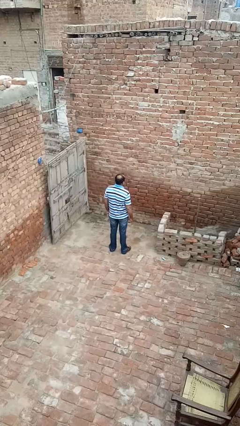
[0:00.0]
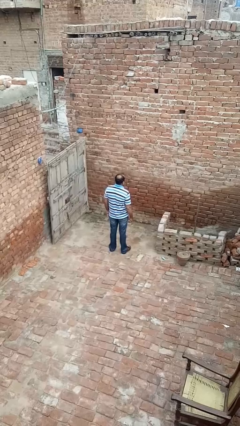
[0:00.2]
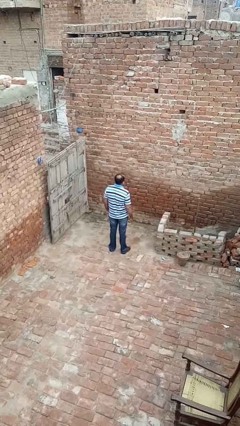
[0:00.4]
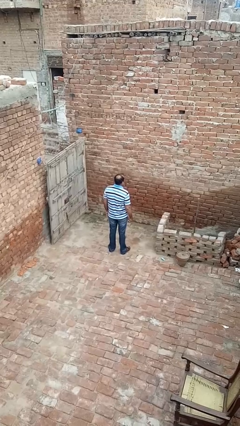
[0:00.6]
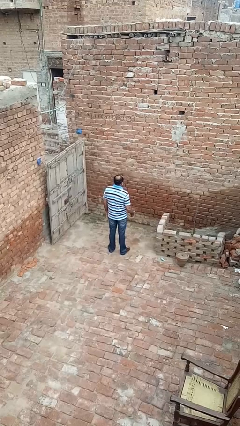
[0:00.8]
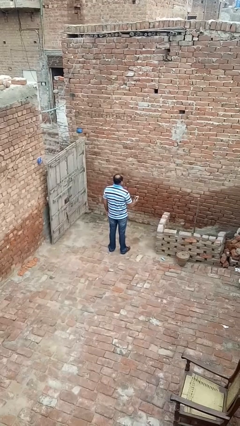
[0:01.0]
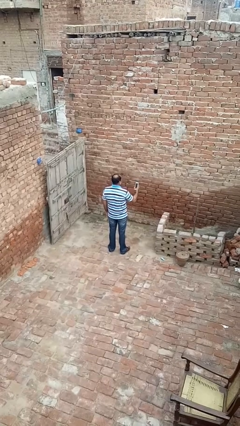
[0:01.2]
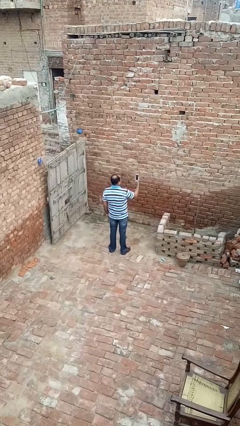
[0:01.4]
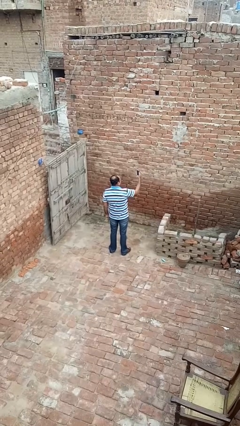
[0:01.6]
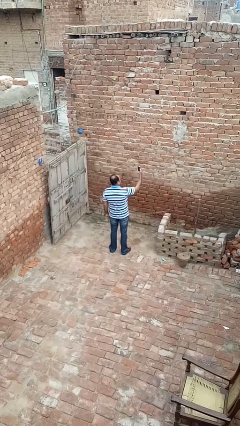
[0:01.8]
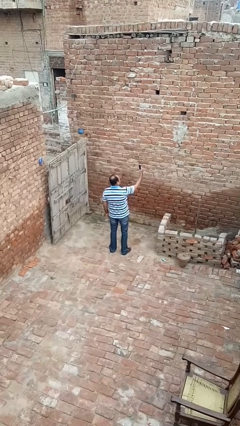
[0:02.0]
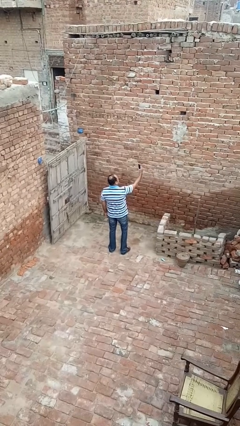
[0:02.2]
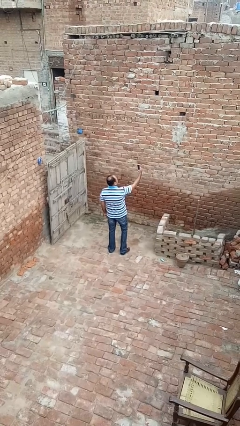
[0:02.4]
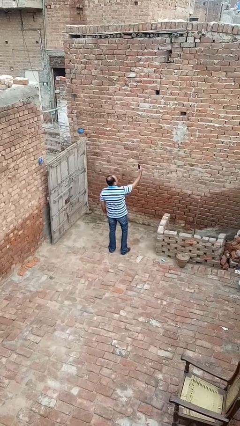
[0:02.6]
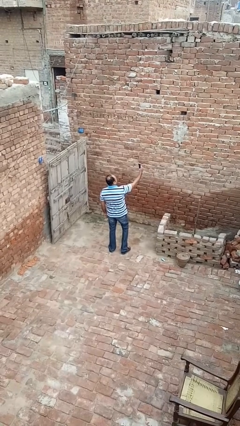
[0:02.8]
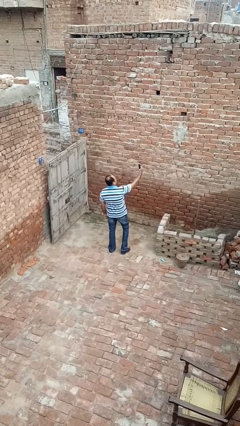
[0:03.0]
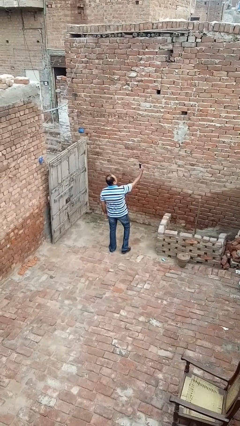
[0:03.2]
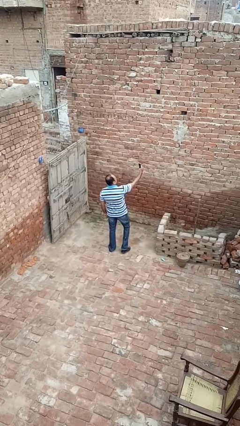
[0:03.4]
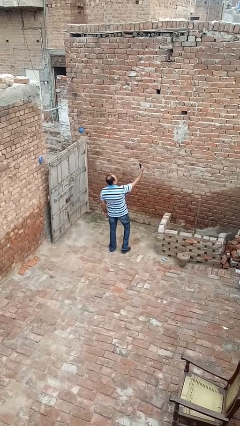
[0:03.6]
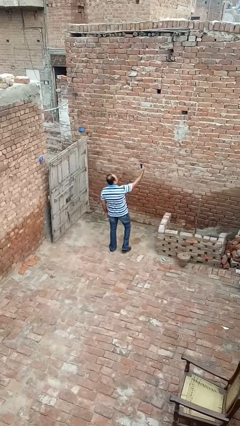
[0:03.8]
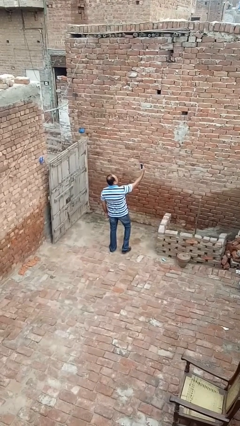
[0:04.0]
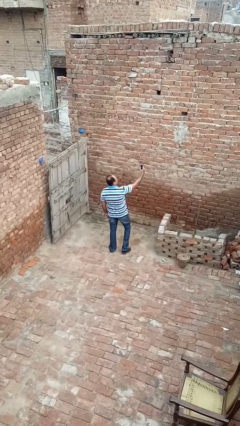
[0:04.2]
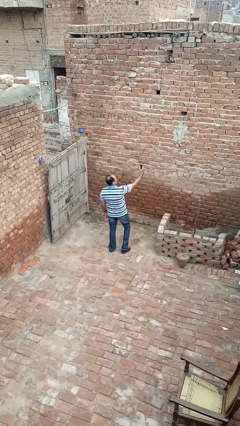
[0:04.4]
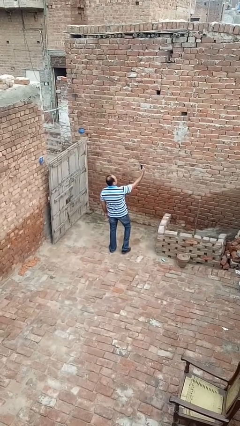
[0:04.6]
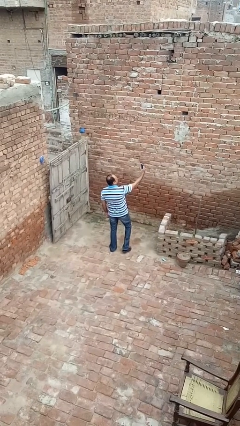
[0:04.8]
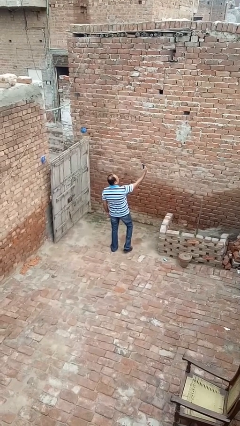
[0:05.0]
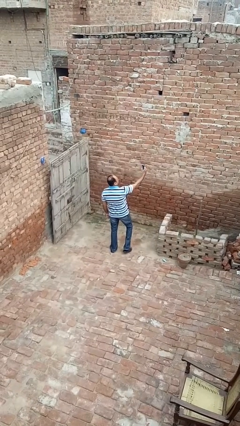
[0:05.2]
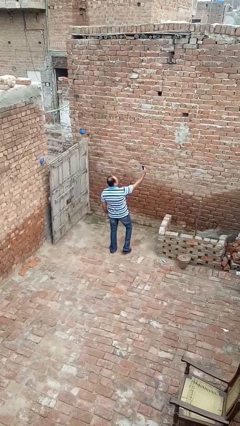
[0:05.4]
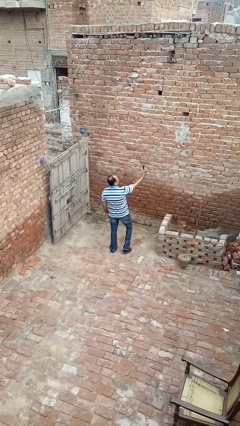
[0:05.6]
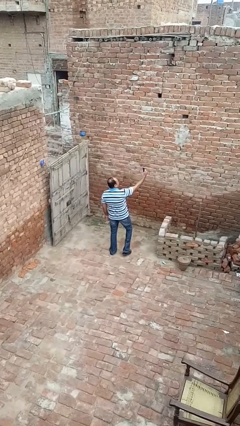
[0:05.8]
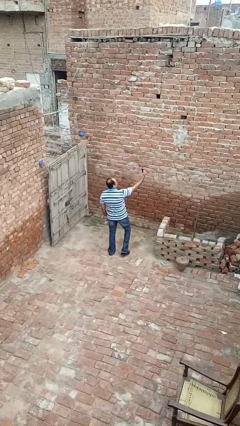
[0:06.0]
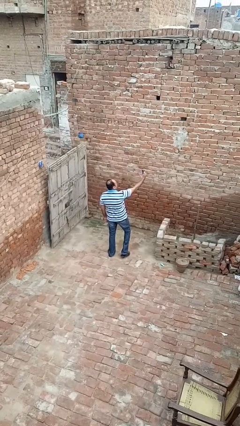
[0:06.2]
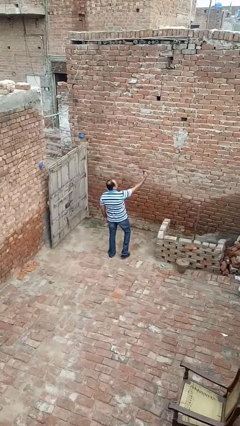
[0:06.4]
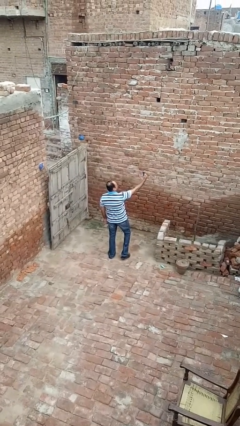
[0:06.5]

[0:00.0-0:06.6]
person takes selfie

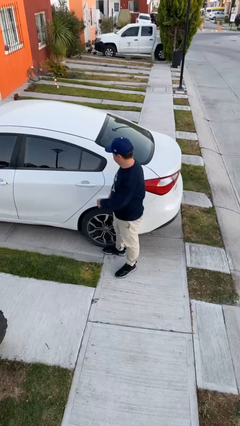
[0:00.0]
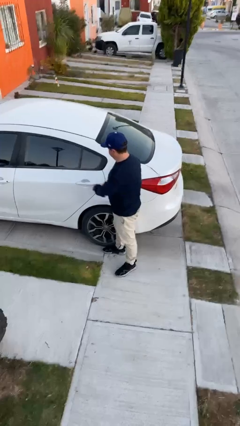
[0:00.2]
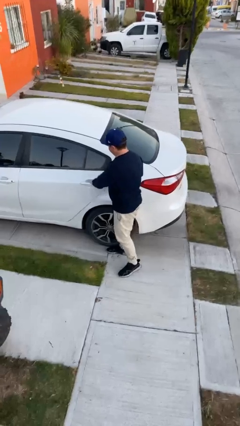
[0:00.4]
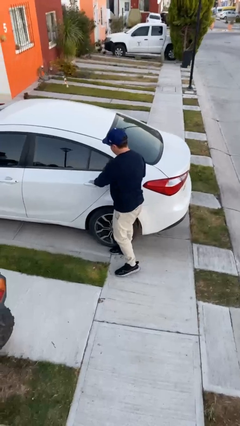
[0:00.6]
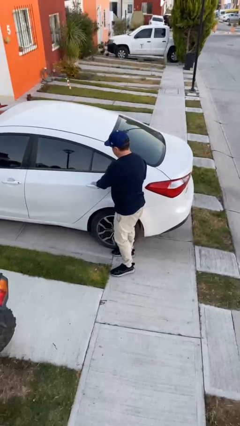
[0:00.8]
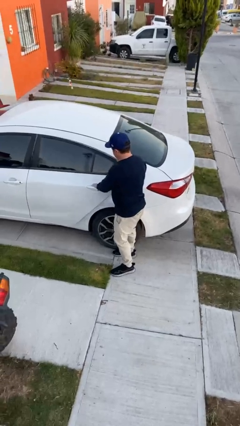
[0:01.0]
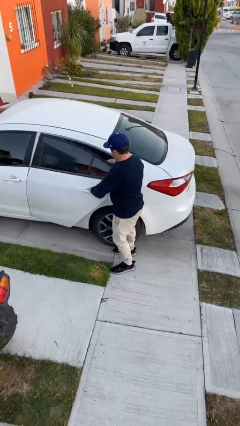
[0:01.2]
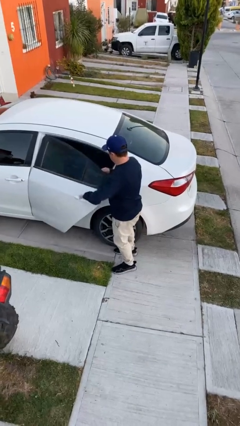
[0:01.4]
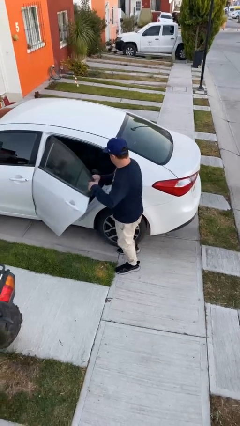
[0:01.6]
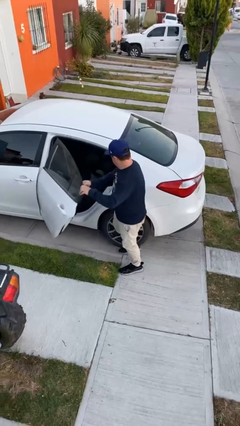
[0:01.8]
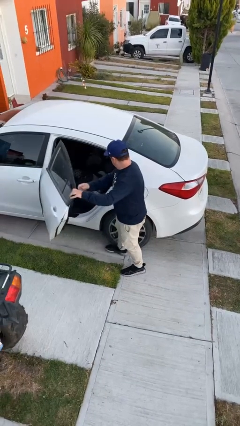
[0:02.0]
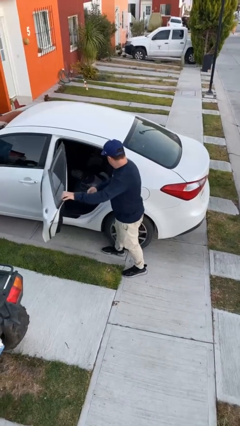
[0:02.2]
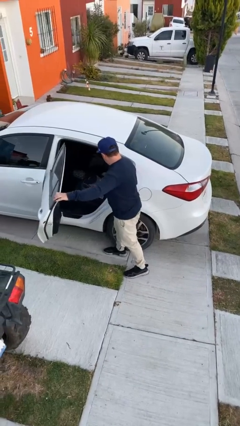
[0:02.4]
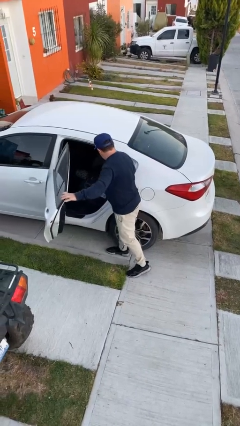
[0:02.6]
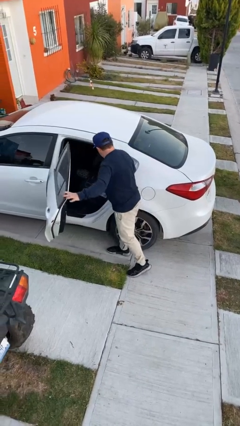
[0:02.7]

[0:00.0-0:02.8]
person opens car door

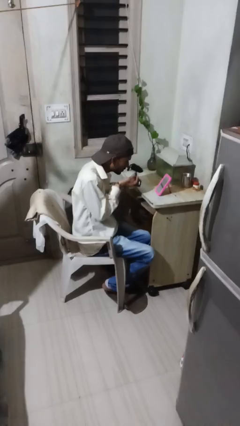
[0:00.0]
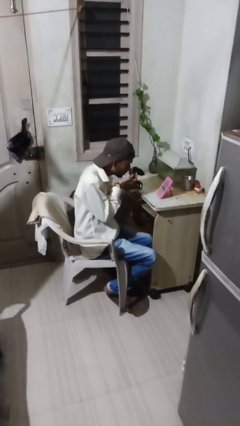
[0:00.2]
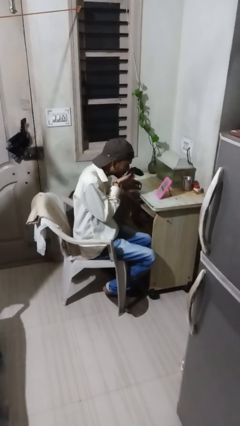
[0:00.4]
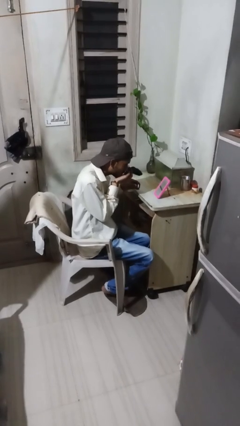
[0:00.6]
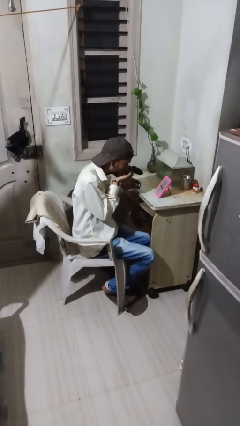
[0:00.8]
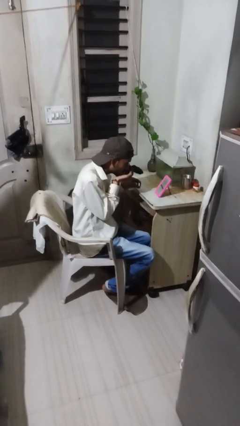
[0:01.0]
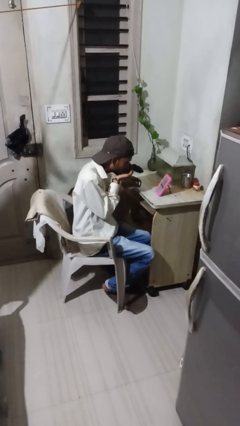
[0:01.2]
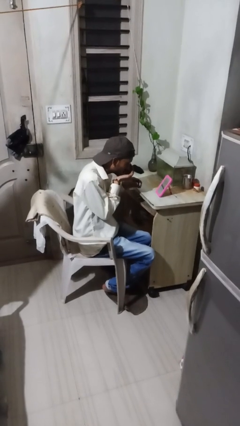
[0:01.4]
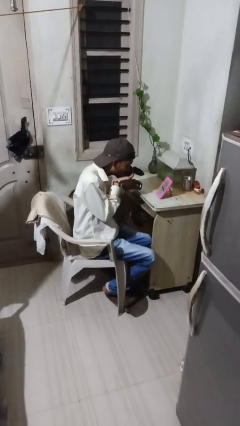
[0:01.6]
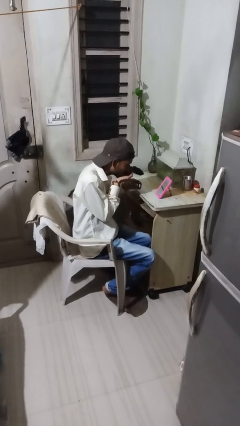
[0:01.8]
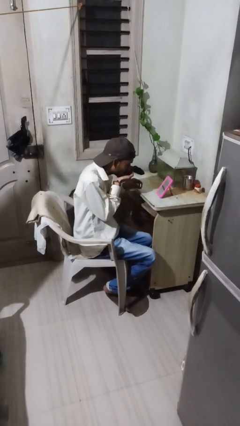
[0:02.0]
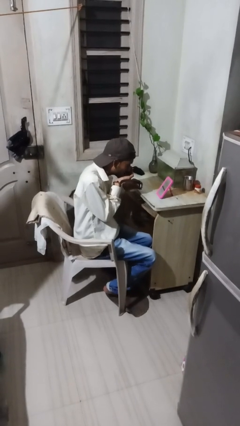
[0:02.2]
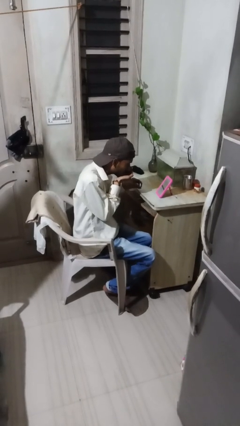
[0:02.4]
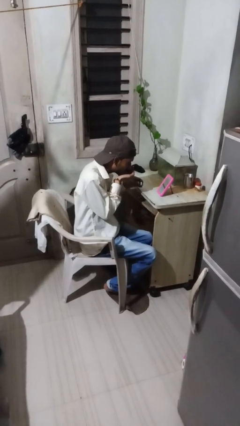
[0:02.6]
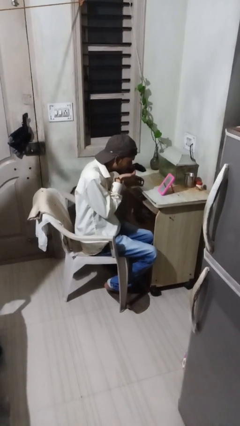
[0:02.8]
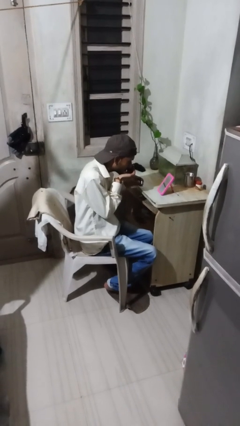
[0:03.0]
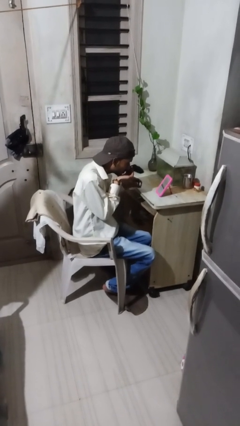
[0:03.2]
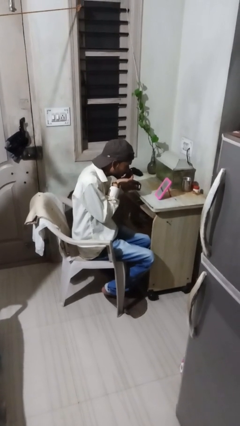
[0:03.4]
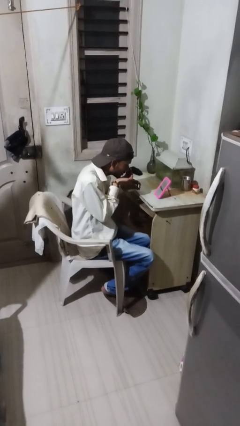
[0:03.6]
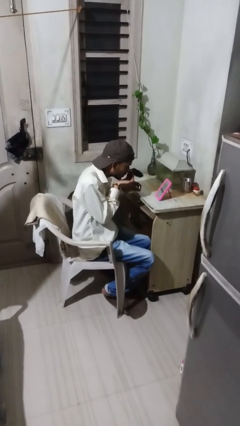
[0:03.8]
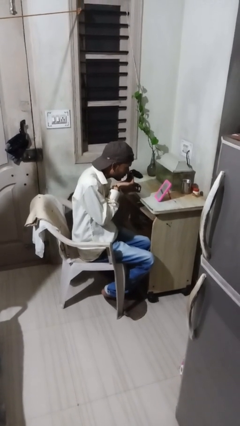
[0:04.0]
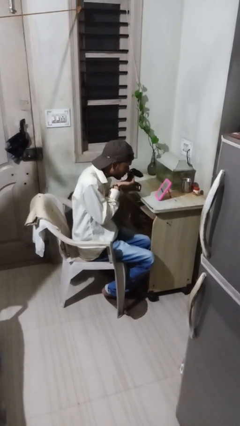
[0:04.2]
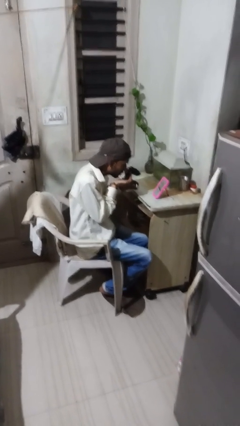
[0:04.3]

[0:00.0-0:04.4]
person applies eye makeup

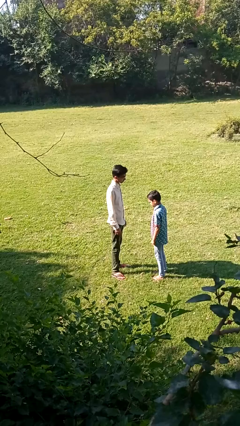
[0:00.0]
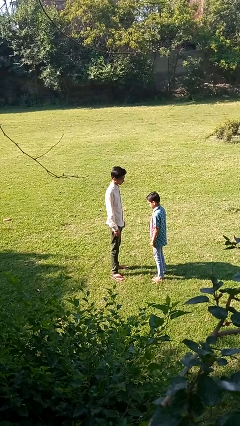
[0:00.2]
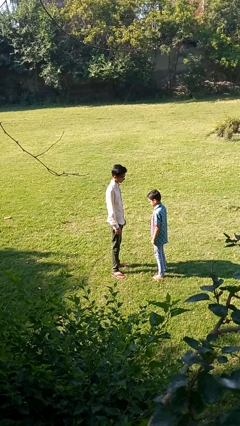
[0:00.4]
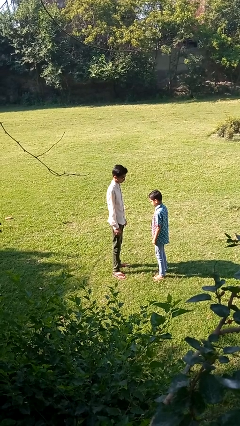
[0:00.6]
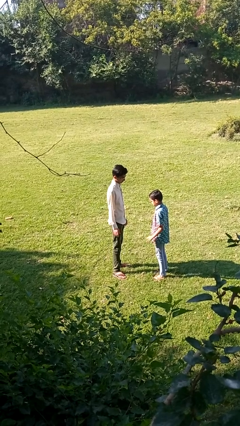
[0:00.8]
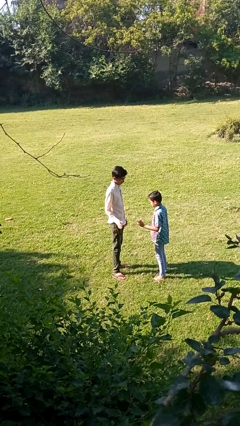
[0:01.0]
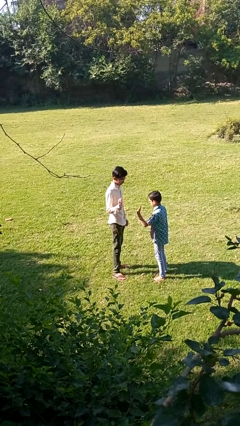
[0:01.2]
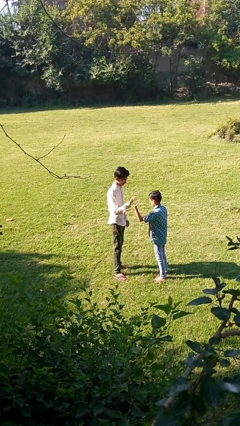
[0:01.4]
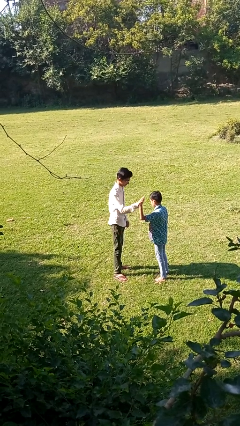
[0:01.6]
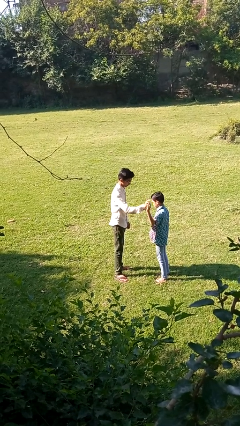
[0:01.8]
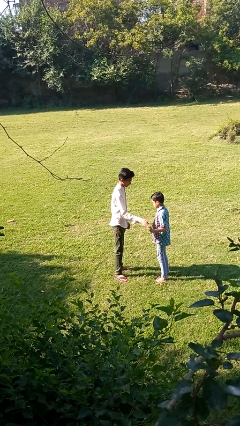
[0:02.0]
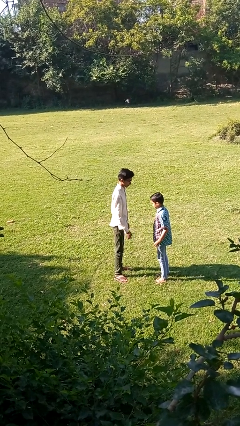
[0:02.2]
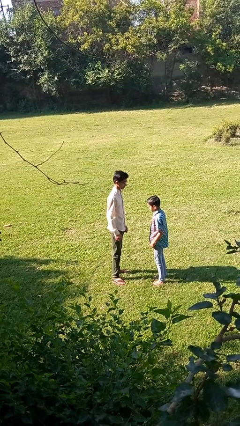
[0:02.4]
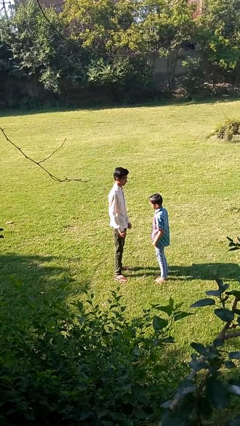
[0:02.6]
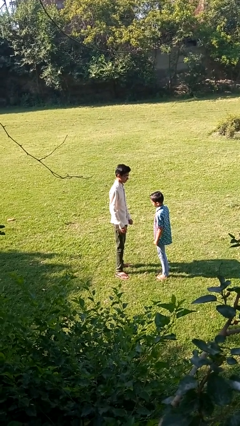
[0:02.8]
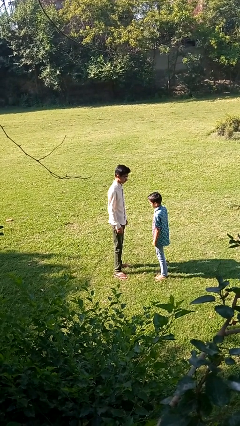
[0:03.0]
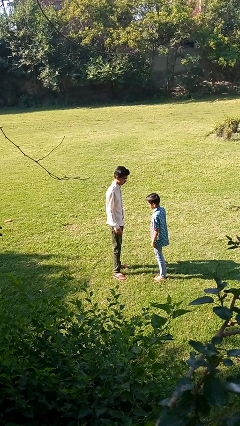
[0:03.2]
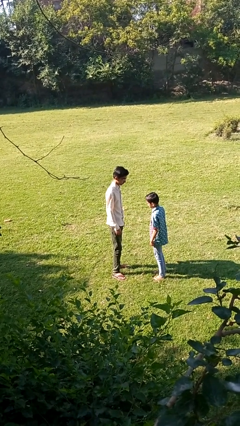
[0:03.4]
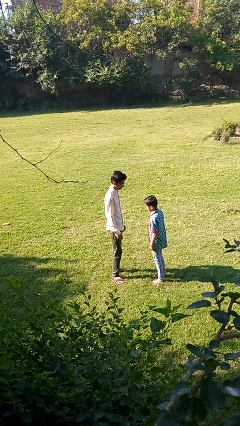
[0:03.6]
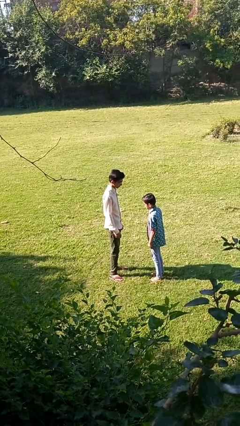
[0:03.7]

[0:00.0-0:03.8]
person highfives hand
